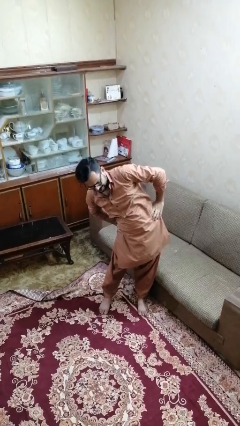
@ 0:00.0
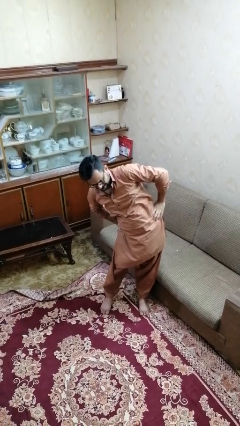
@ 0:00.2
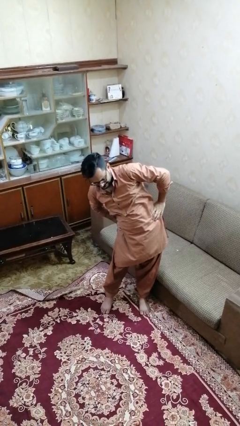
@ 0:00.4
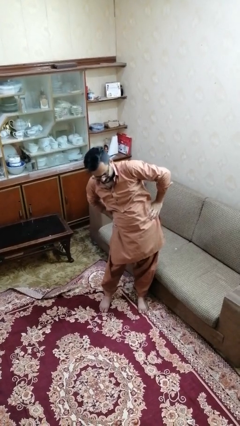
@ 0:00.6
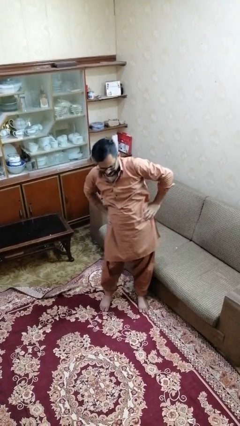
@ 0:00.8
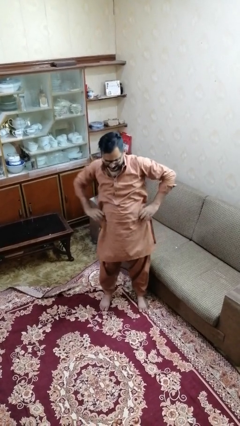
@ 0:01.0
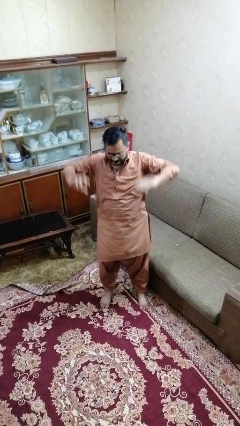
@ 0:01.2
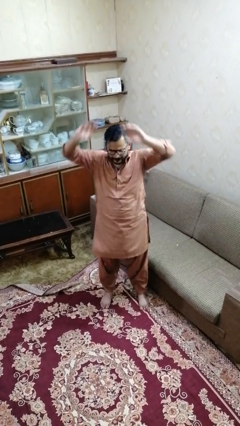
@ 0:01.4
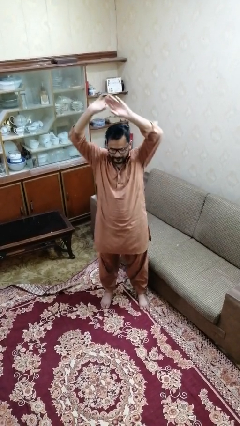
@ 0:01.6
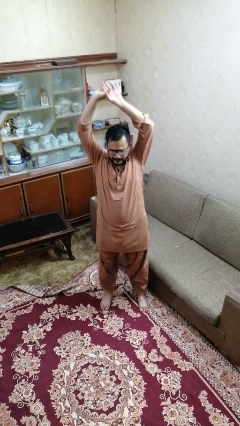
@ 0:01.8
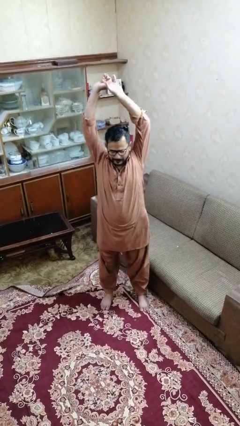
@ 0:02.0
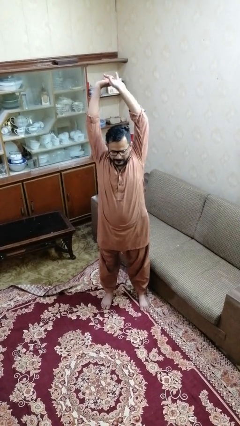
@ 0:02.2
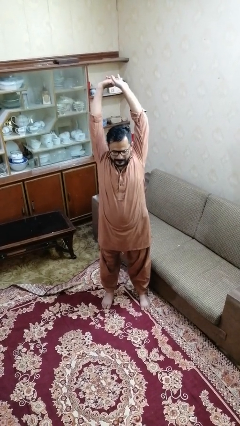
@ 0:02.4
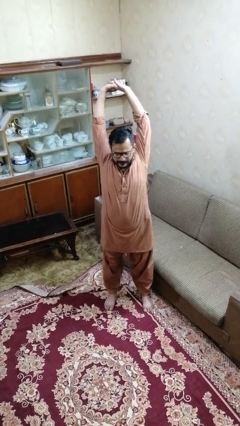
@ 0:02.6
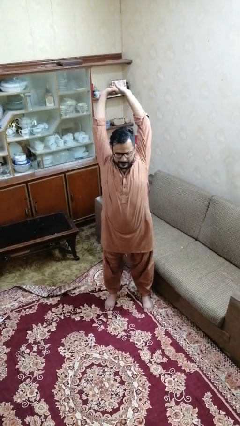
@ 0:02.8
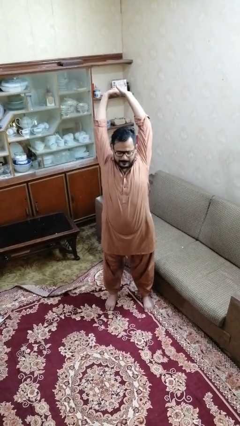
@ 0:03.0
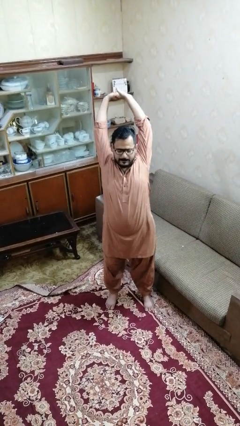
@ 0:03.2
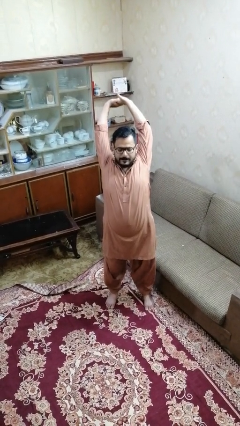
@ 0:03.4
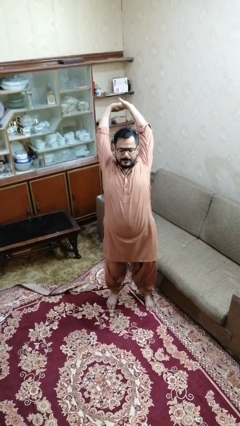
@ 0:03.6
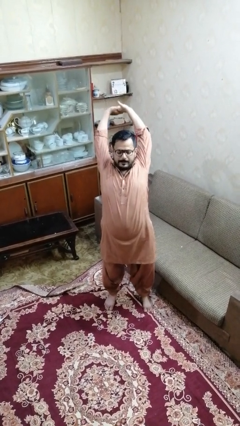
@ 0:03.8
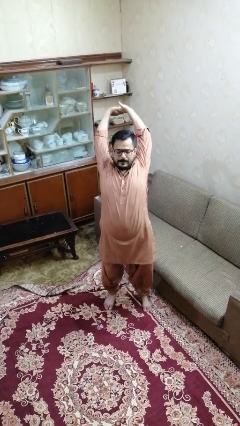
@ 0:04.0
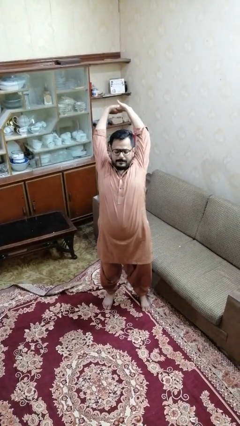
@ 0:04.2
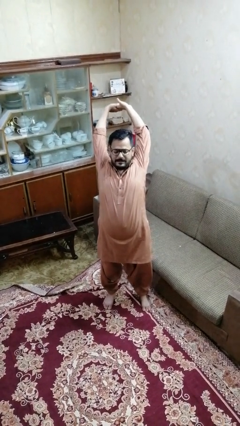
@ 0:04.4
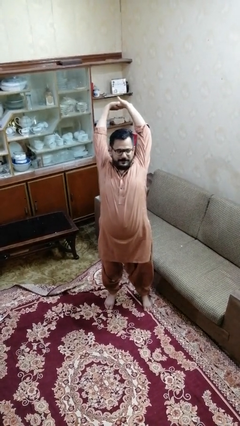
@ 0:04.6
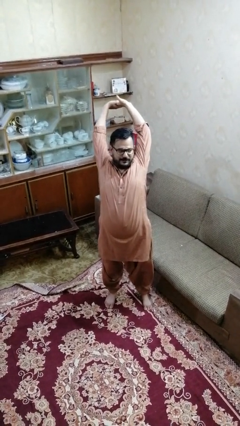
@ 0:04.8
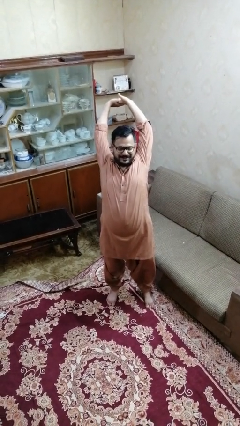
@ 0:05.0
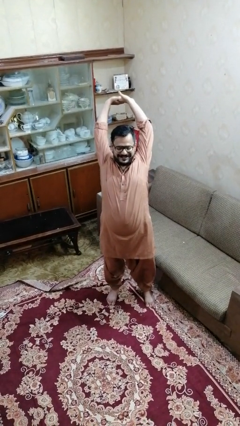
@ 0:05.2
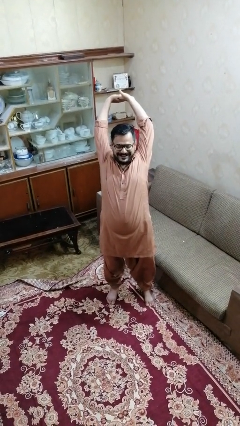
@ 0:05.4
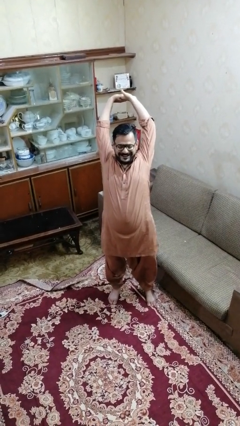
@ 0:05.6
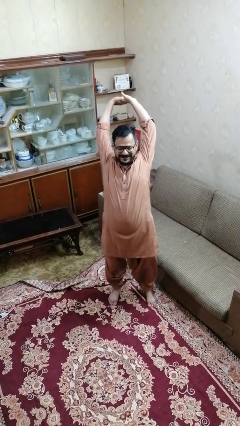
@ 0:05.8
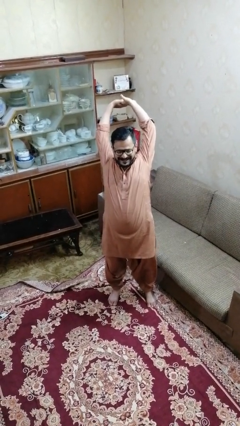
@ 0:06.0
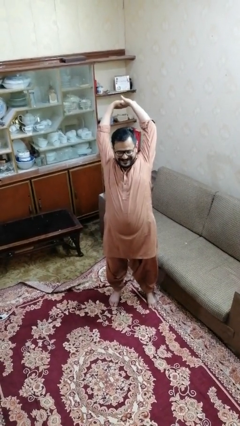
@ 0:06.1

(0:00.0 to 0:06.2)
person stretches arms over head

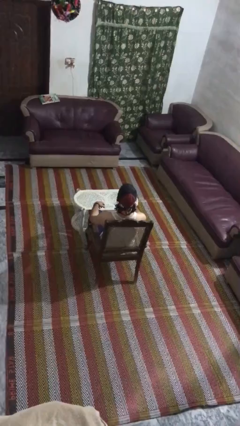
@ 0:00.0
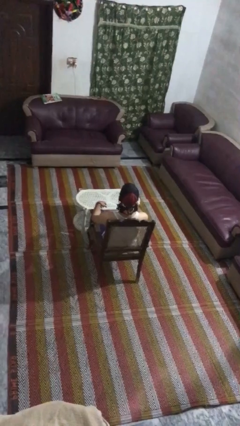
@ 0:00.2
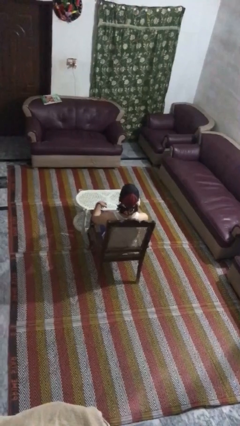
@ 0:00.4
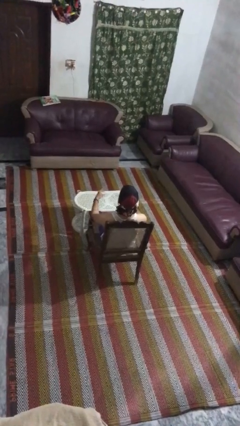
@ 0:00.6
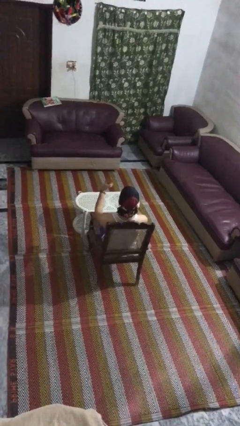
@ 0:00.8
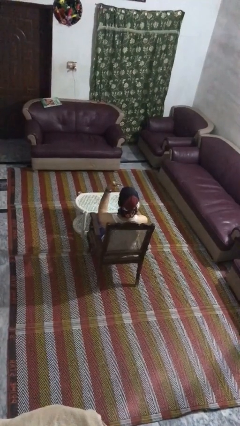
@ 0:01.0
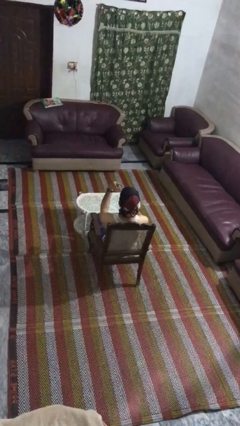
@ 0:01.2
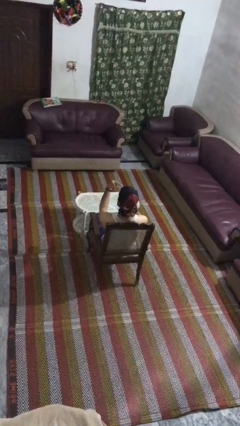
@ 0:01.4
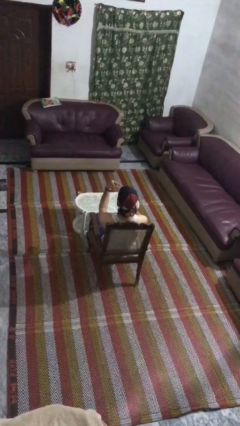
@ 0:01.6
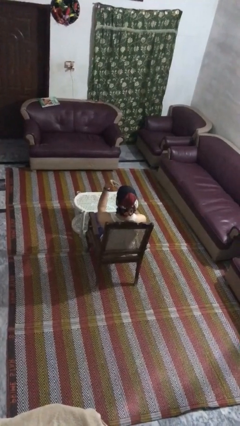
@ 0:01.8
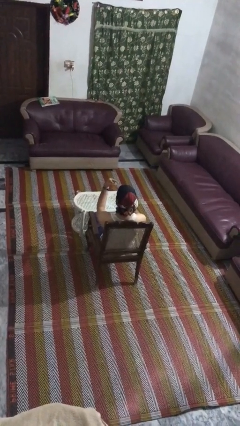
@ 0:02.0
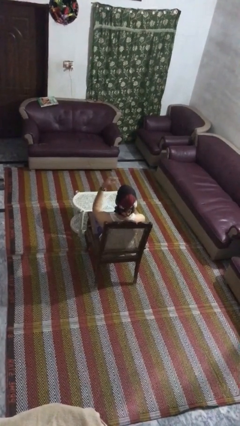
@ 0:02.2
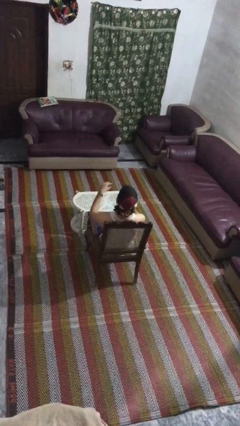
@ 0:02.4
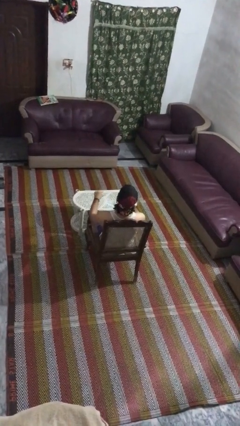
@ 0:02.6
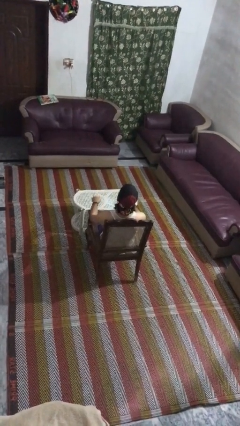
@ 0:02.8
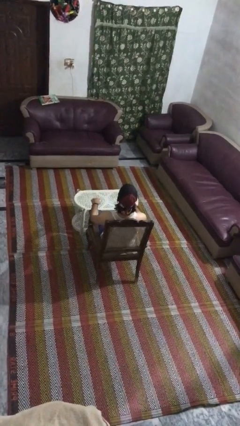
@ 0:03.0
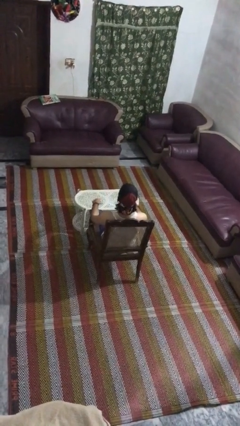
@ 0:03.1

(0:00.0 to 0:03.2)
person gestures watch closely

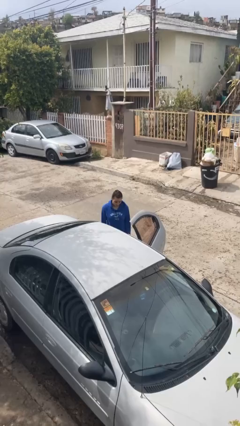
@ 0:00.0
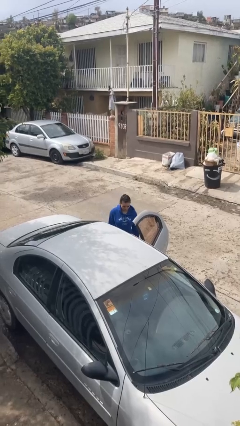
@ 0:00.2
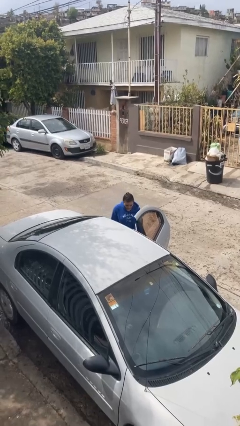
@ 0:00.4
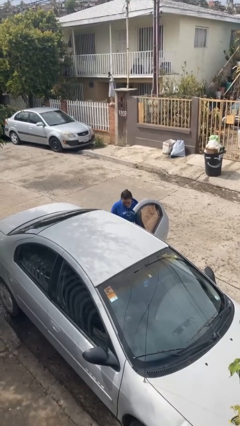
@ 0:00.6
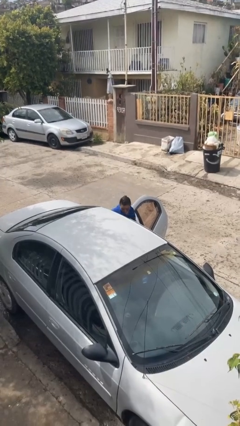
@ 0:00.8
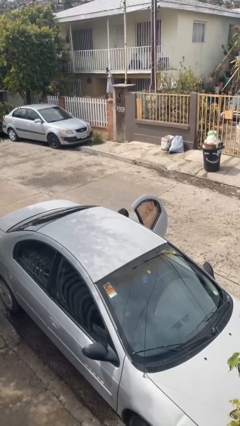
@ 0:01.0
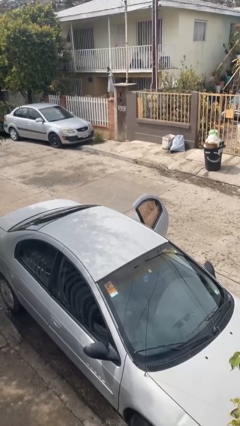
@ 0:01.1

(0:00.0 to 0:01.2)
person enters car

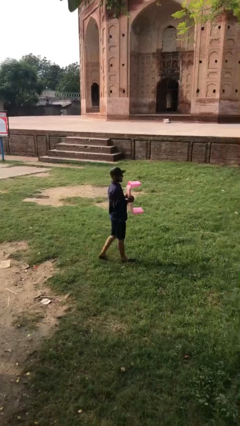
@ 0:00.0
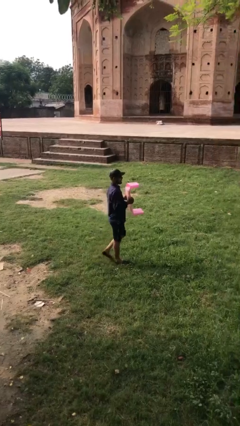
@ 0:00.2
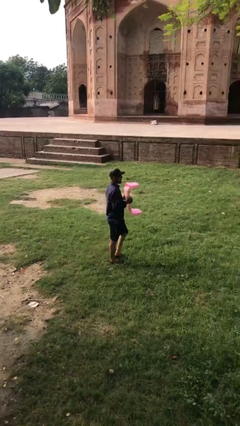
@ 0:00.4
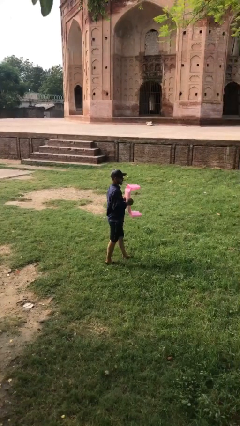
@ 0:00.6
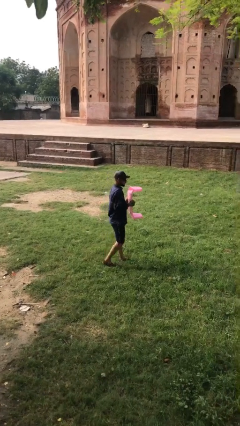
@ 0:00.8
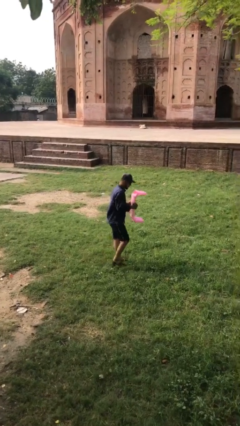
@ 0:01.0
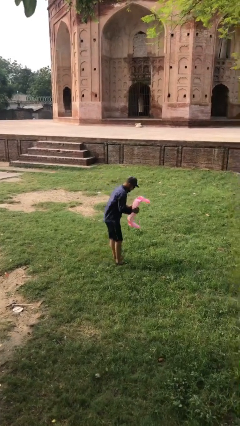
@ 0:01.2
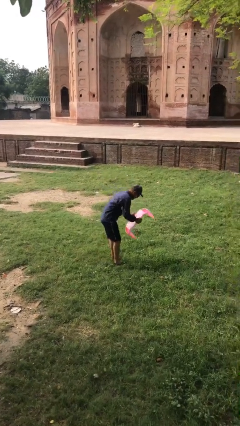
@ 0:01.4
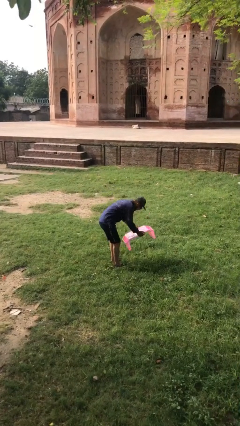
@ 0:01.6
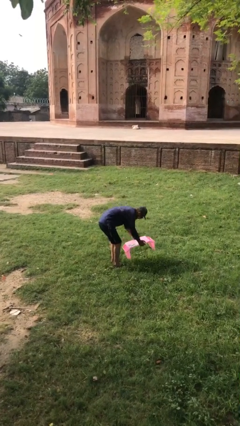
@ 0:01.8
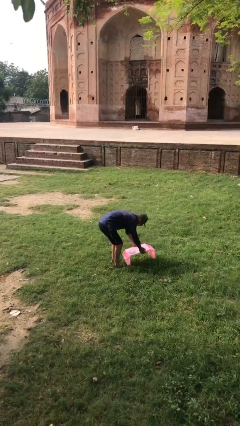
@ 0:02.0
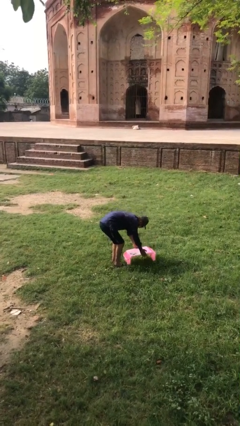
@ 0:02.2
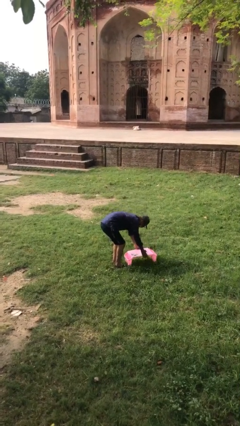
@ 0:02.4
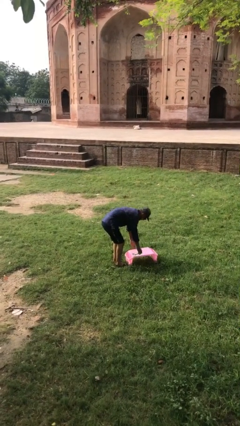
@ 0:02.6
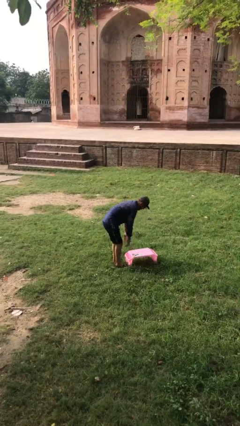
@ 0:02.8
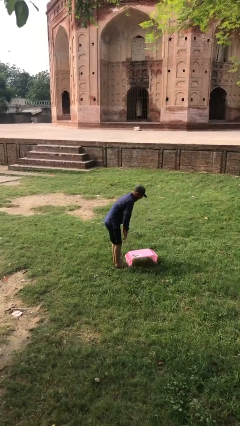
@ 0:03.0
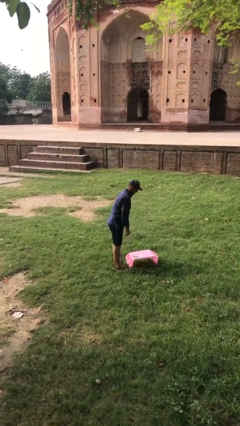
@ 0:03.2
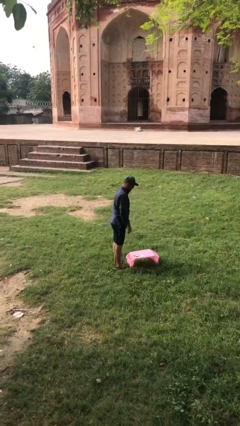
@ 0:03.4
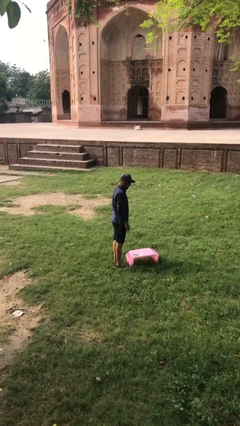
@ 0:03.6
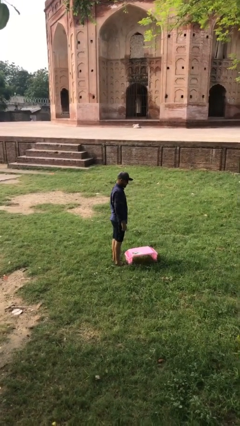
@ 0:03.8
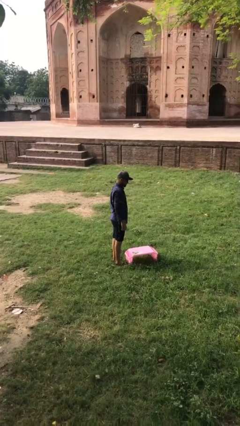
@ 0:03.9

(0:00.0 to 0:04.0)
person puts down object on floor

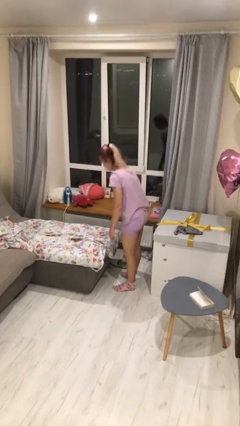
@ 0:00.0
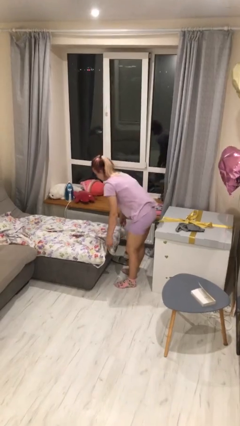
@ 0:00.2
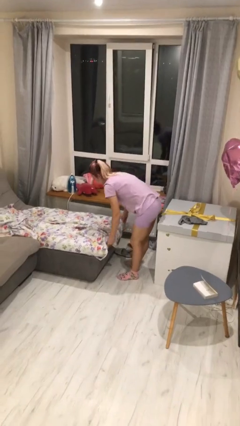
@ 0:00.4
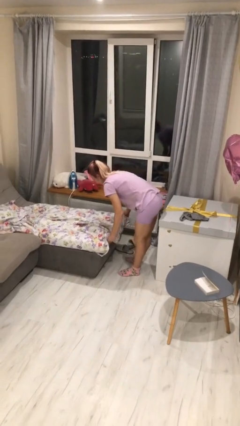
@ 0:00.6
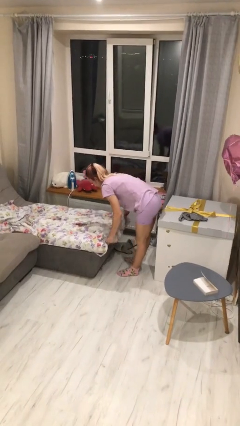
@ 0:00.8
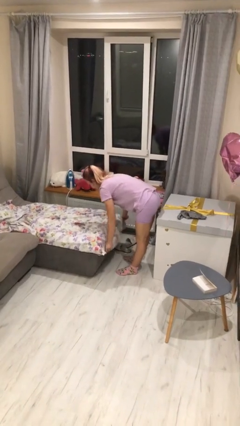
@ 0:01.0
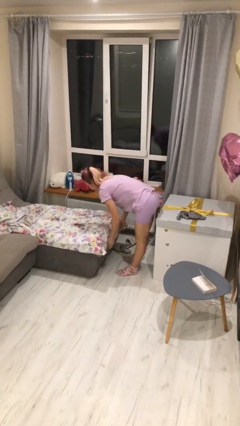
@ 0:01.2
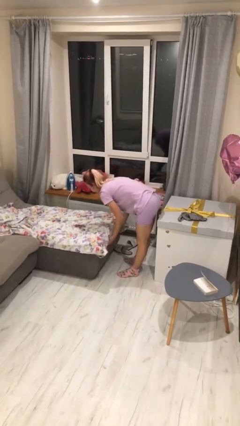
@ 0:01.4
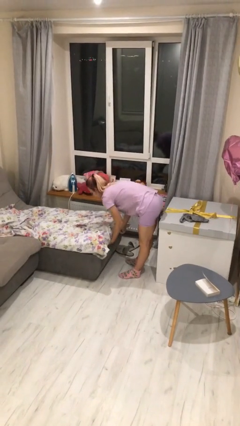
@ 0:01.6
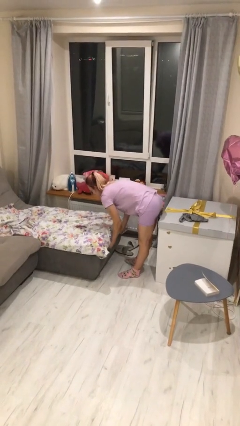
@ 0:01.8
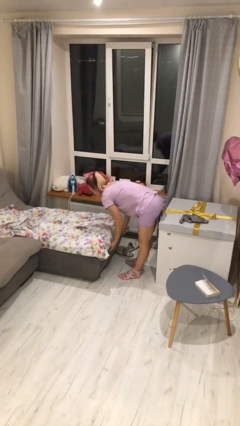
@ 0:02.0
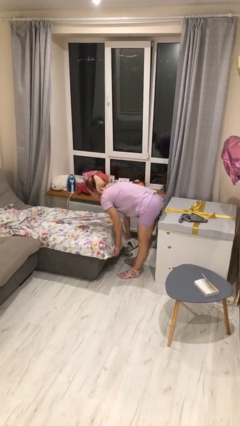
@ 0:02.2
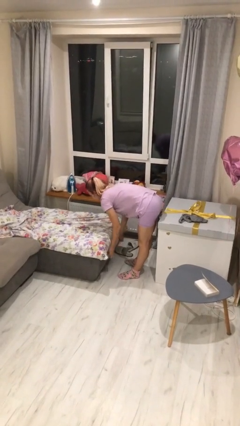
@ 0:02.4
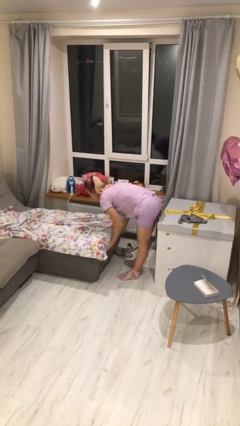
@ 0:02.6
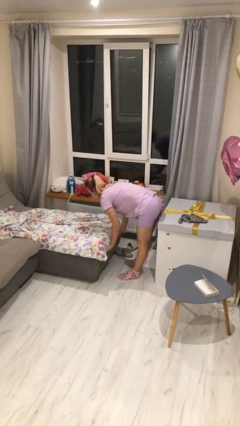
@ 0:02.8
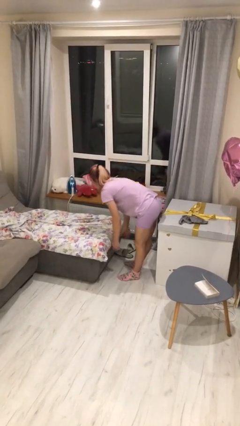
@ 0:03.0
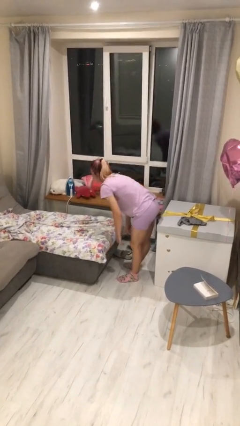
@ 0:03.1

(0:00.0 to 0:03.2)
person makes bed
